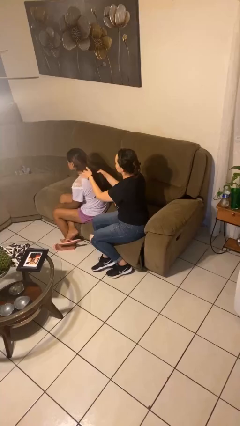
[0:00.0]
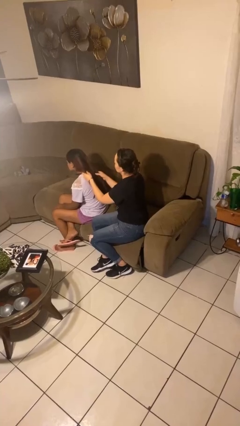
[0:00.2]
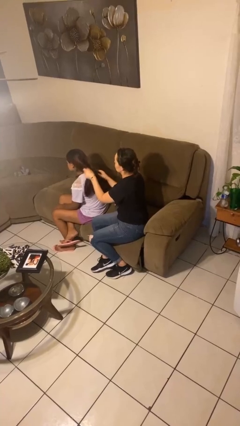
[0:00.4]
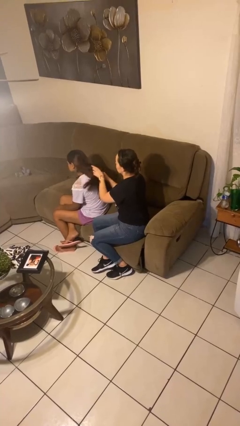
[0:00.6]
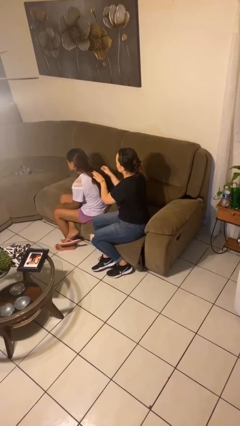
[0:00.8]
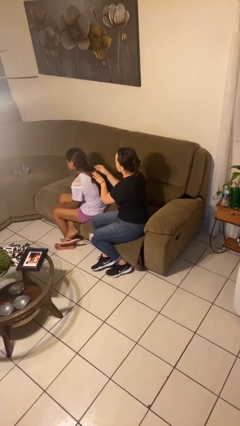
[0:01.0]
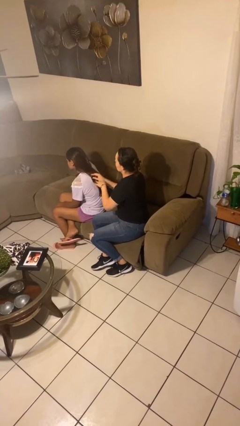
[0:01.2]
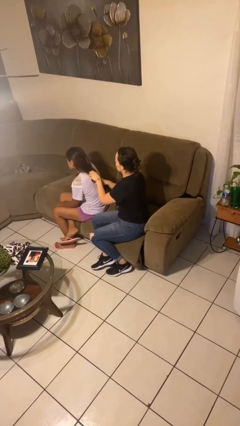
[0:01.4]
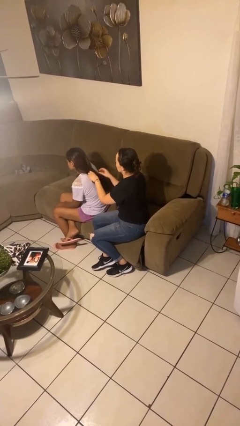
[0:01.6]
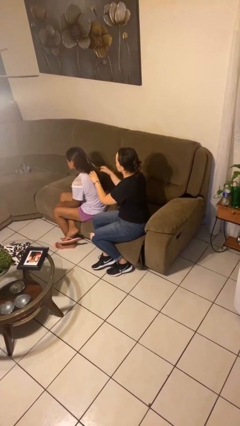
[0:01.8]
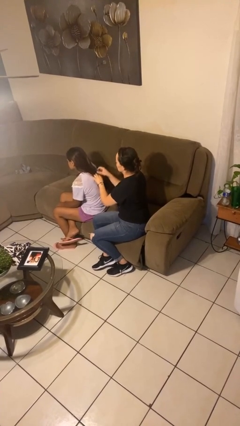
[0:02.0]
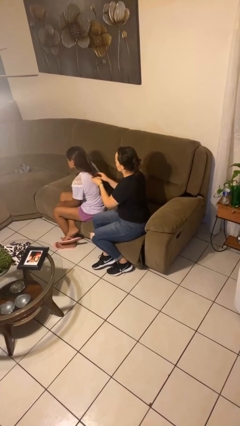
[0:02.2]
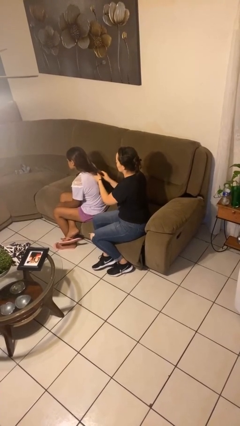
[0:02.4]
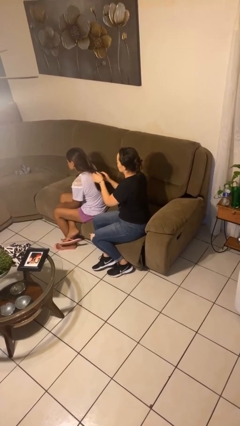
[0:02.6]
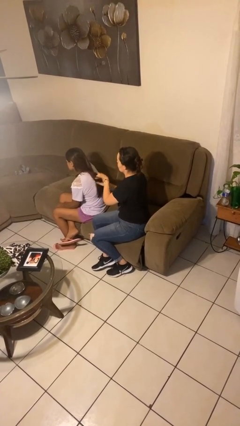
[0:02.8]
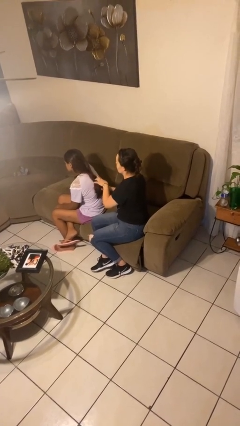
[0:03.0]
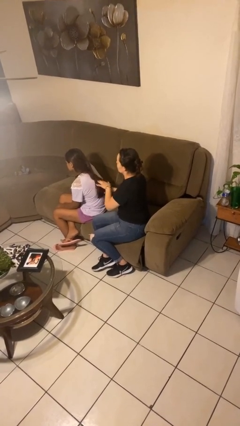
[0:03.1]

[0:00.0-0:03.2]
person braids hair of person

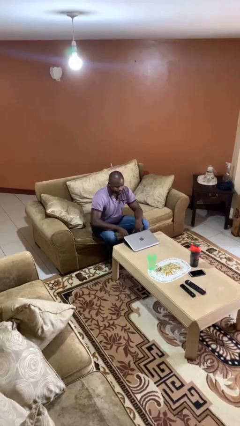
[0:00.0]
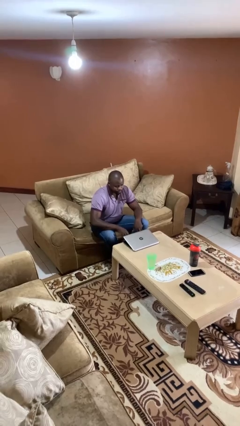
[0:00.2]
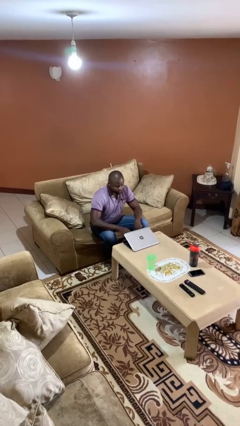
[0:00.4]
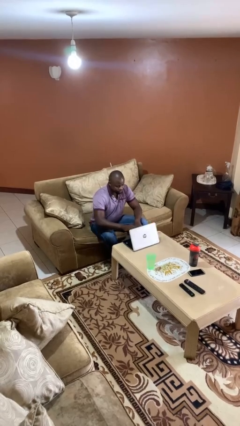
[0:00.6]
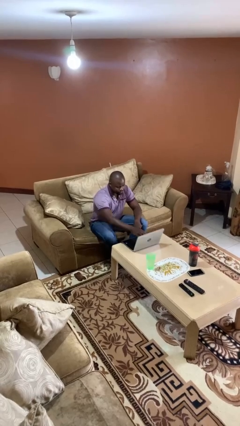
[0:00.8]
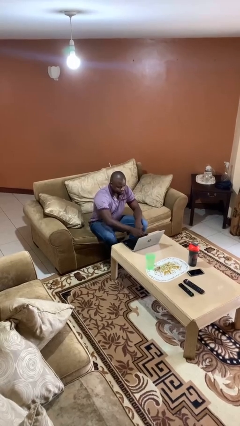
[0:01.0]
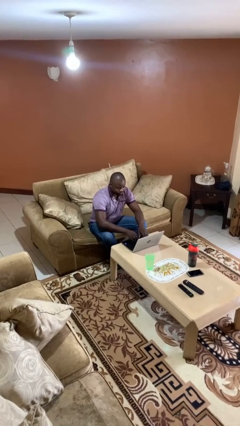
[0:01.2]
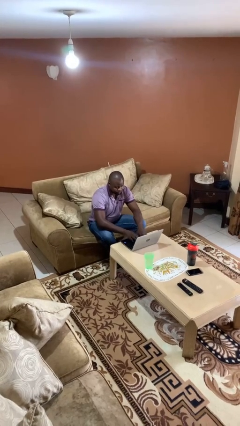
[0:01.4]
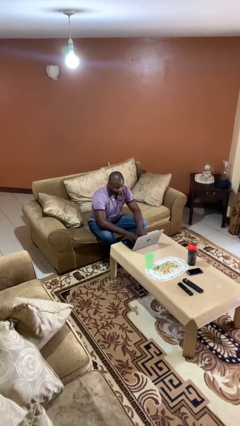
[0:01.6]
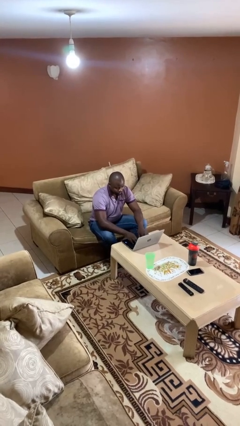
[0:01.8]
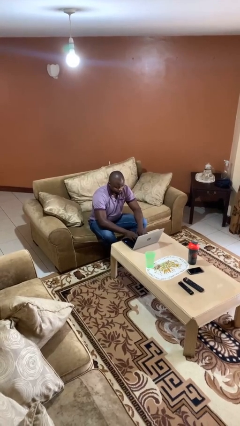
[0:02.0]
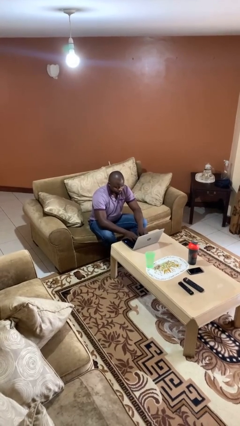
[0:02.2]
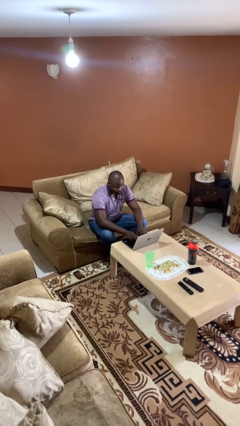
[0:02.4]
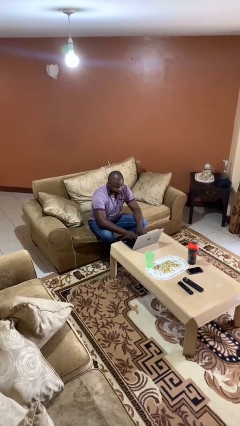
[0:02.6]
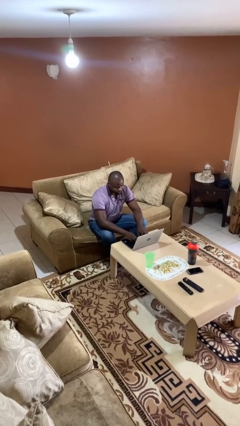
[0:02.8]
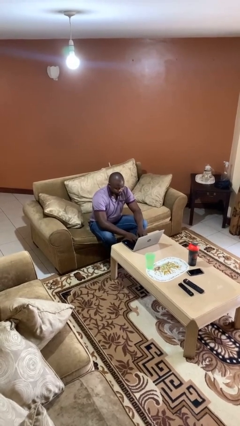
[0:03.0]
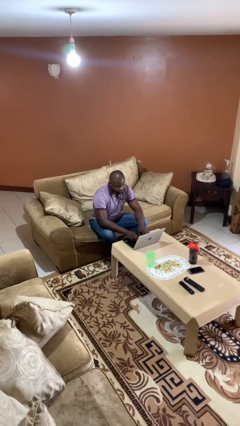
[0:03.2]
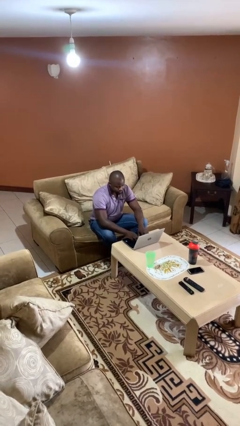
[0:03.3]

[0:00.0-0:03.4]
person interacts with laptop

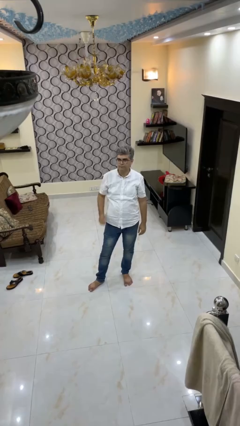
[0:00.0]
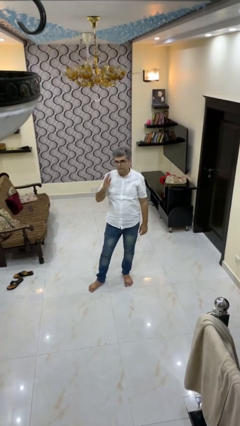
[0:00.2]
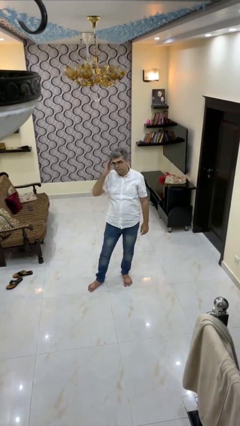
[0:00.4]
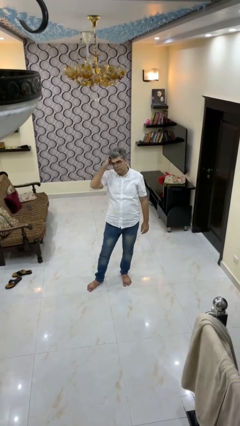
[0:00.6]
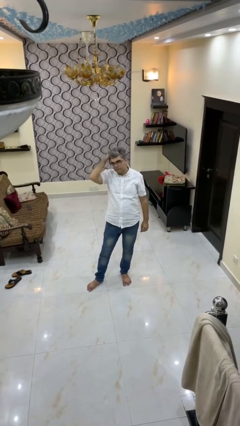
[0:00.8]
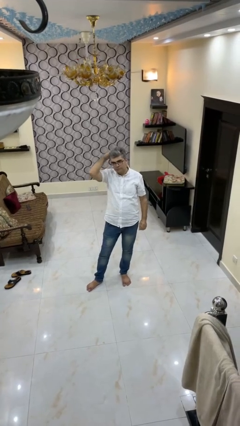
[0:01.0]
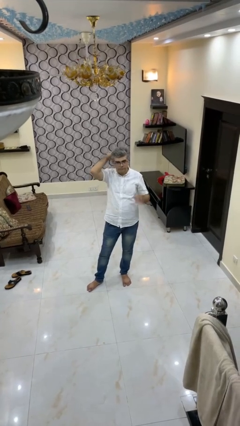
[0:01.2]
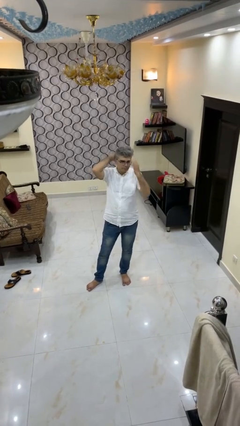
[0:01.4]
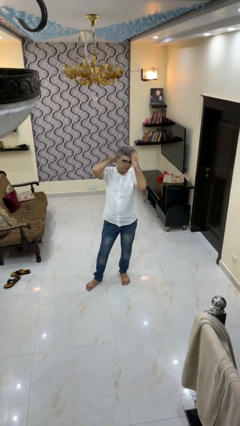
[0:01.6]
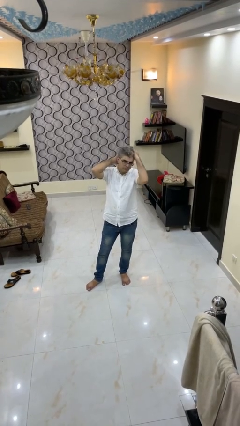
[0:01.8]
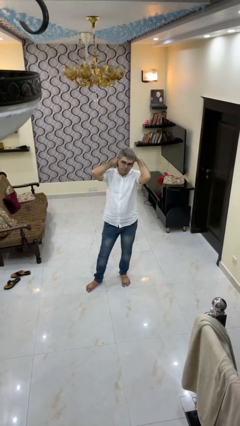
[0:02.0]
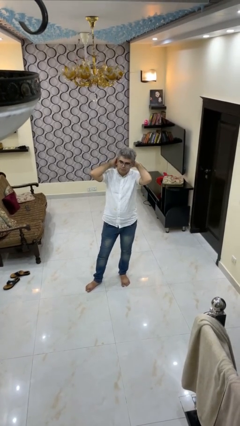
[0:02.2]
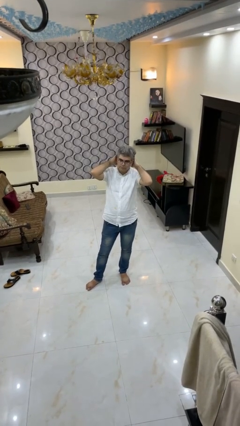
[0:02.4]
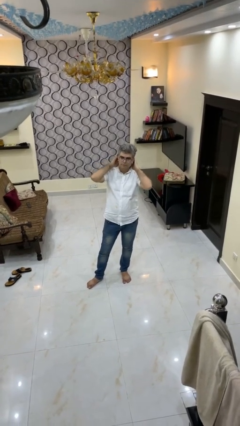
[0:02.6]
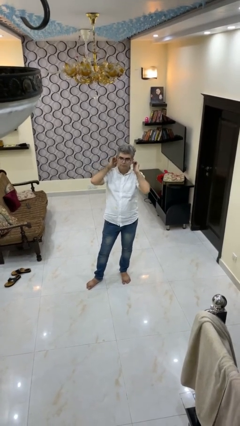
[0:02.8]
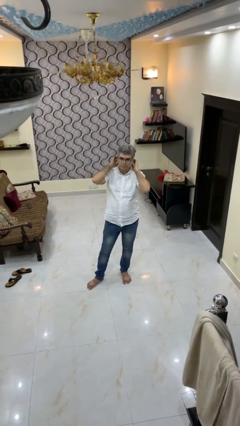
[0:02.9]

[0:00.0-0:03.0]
person strokes hair

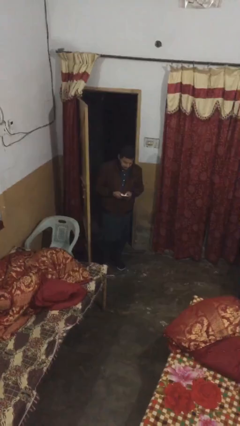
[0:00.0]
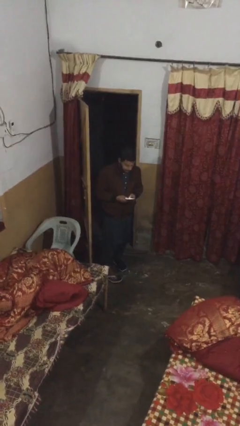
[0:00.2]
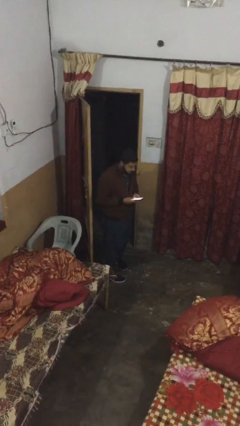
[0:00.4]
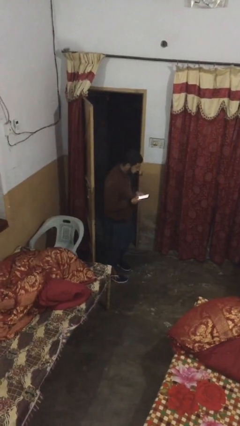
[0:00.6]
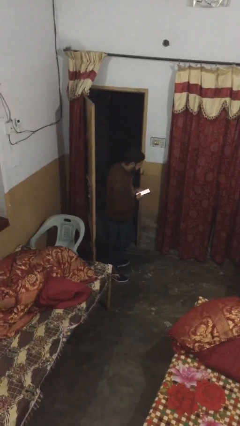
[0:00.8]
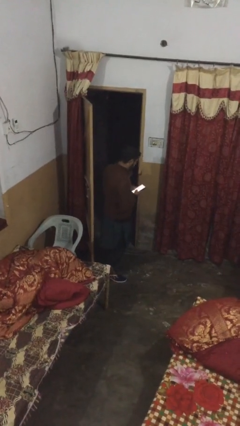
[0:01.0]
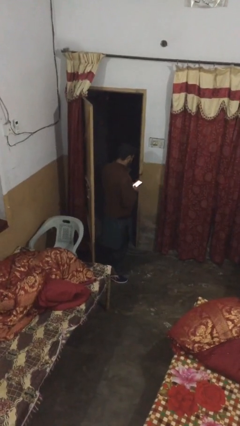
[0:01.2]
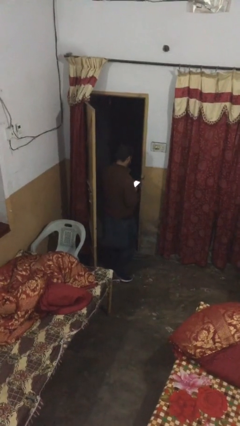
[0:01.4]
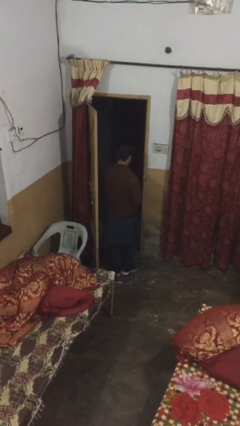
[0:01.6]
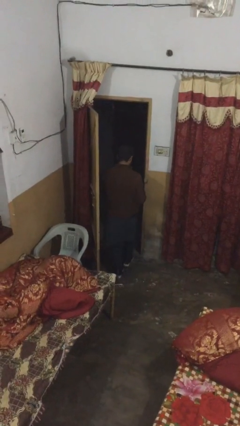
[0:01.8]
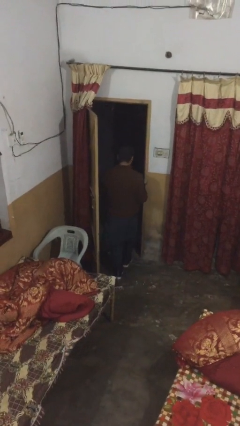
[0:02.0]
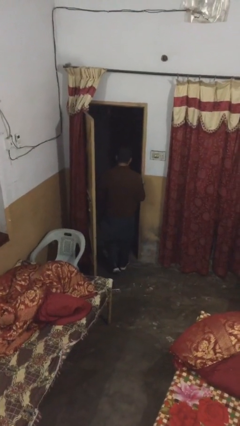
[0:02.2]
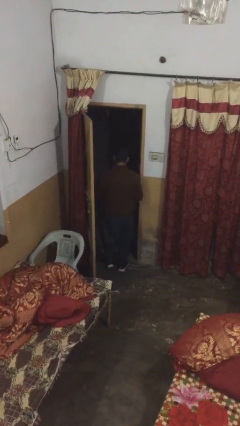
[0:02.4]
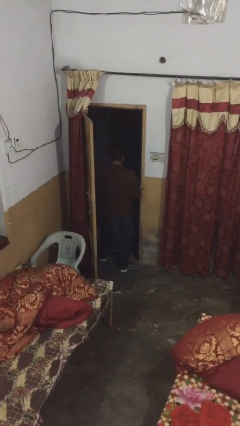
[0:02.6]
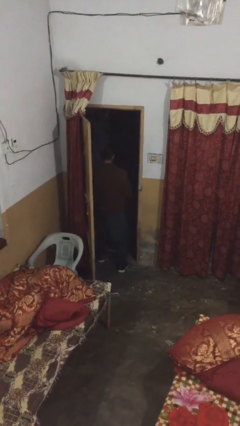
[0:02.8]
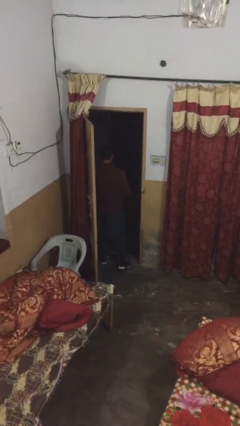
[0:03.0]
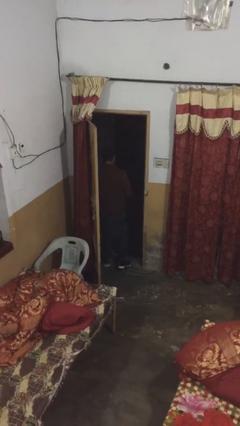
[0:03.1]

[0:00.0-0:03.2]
person exits scene through structure

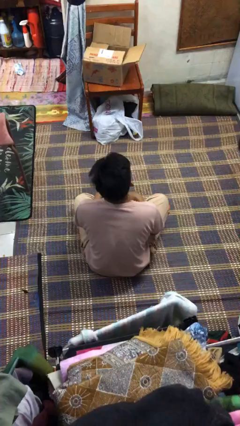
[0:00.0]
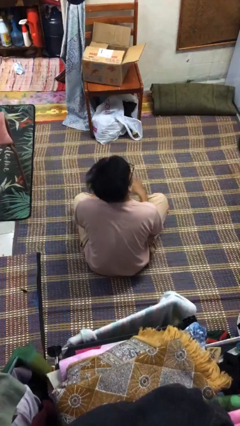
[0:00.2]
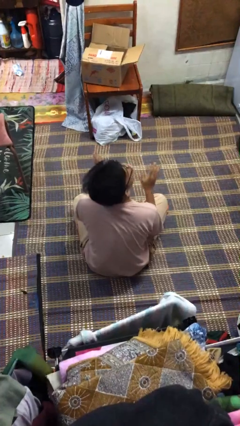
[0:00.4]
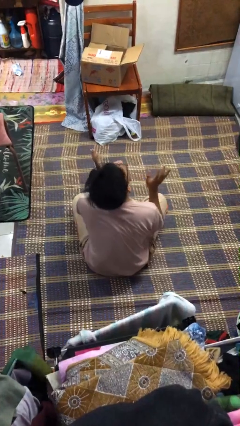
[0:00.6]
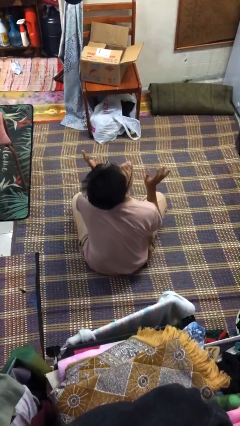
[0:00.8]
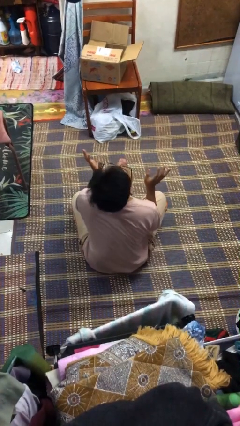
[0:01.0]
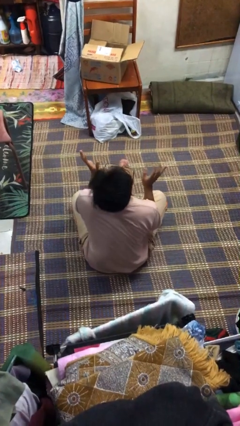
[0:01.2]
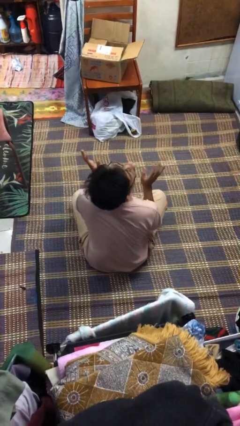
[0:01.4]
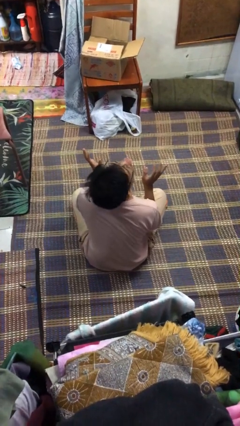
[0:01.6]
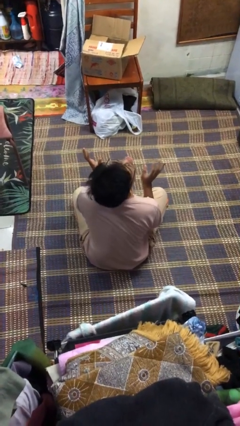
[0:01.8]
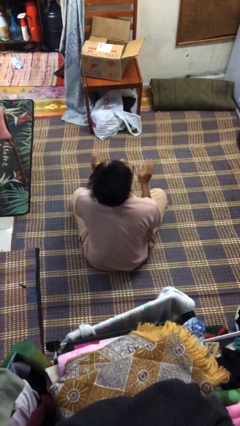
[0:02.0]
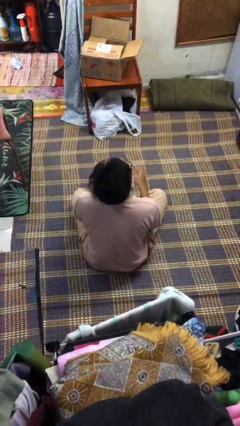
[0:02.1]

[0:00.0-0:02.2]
person sticks out tongue

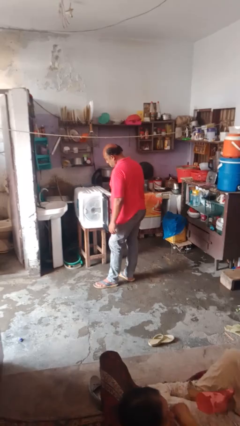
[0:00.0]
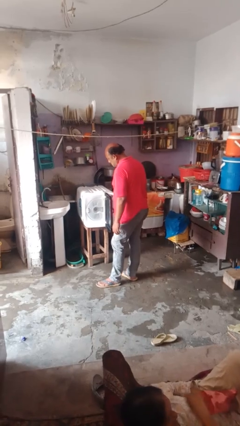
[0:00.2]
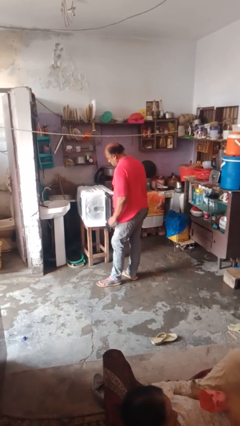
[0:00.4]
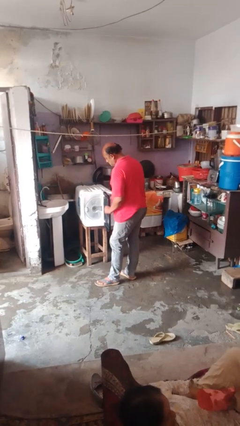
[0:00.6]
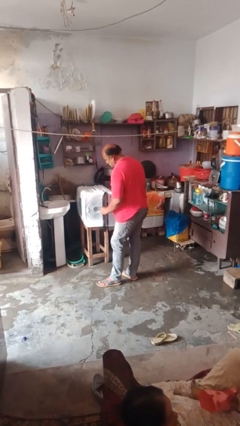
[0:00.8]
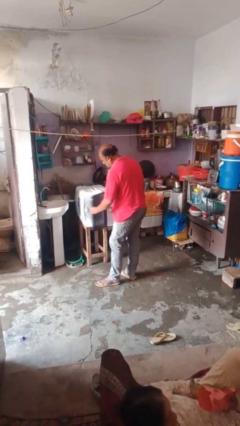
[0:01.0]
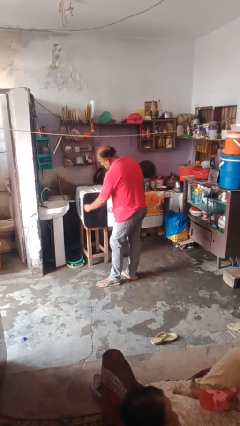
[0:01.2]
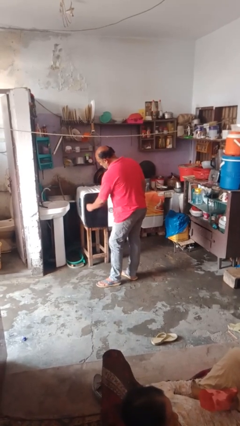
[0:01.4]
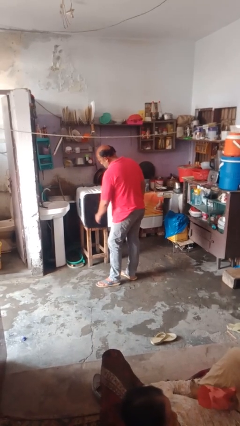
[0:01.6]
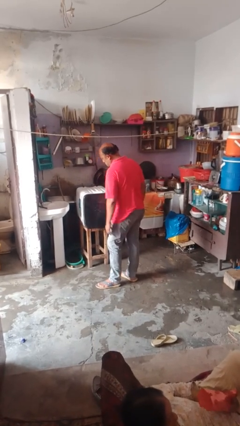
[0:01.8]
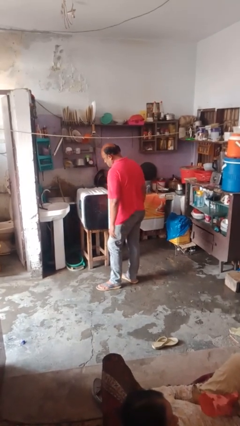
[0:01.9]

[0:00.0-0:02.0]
person closes dishwasher

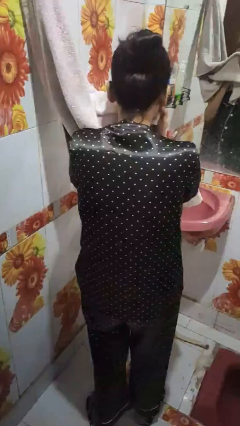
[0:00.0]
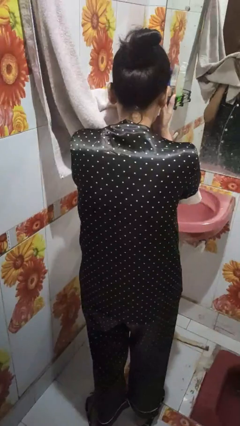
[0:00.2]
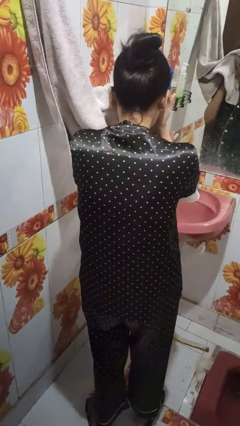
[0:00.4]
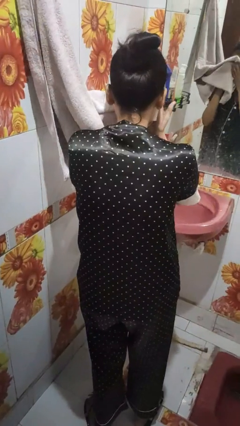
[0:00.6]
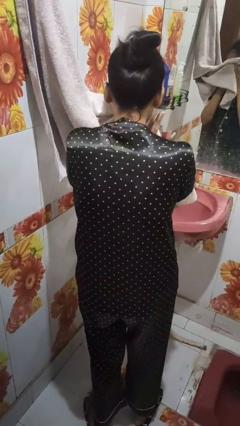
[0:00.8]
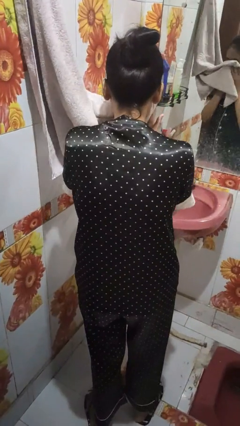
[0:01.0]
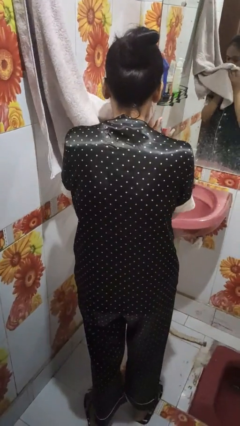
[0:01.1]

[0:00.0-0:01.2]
person dries face with towel
